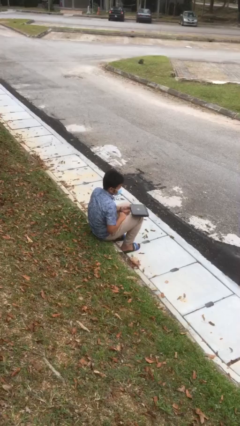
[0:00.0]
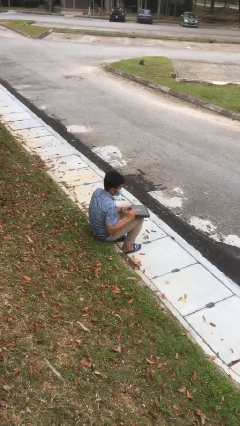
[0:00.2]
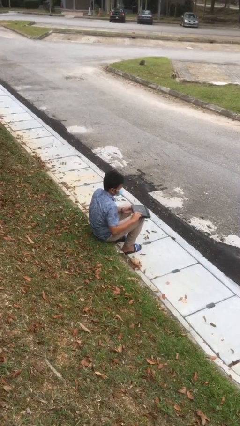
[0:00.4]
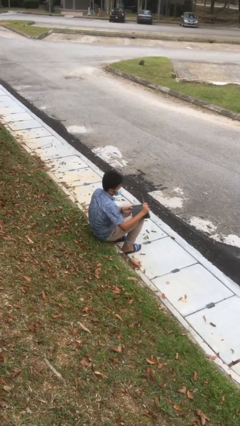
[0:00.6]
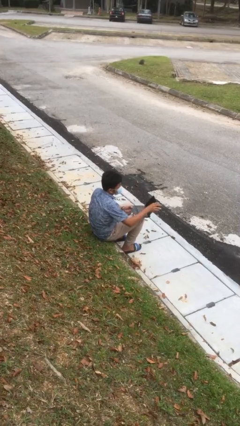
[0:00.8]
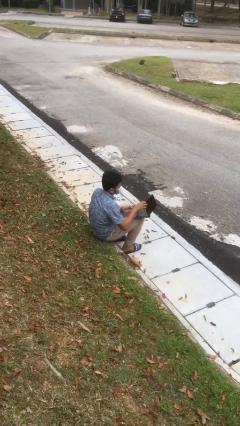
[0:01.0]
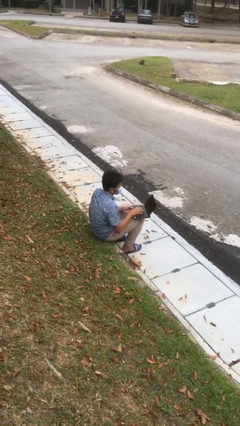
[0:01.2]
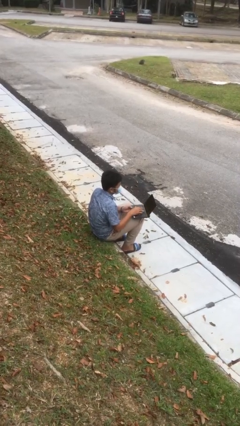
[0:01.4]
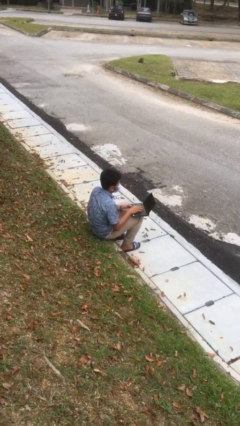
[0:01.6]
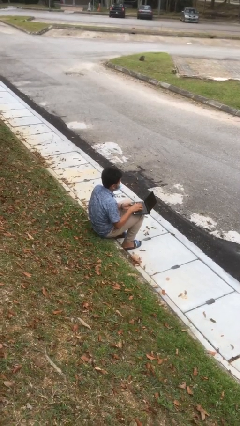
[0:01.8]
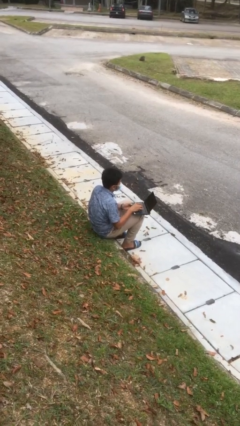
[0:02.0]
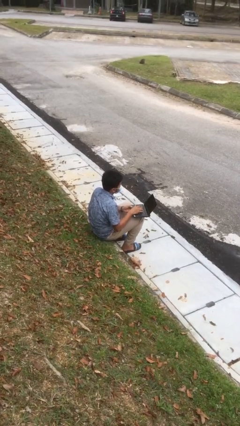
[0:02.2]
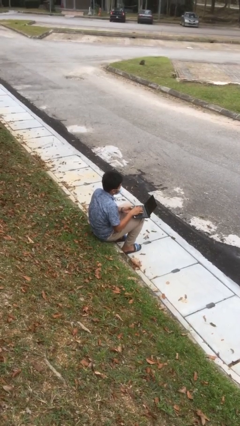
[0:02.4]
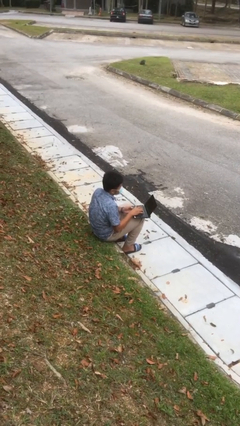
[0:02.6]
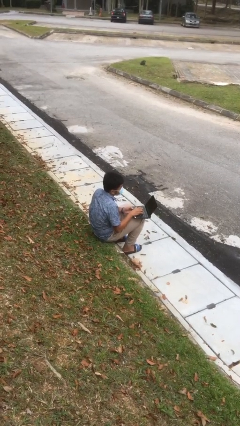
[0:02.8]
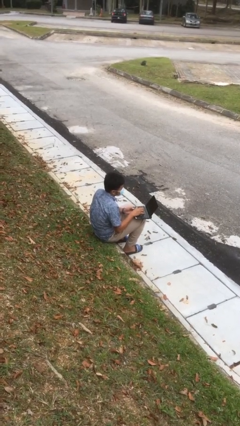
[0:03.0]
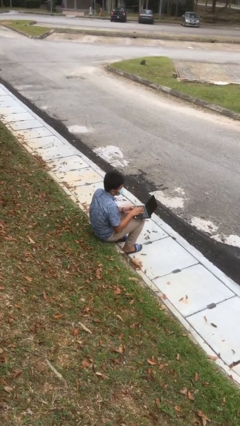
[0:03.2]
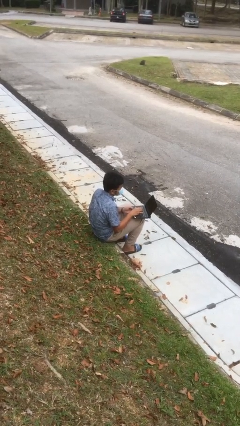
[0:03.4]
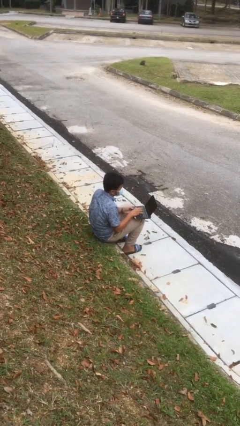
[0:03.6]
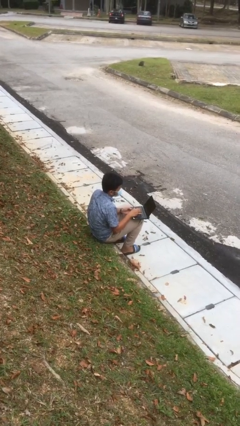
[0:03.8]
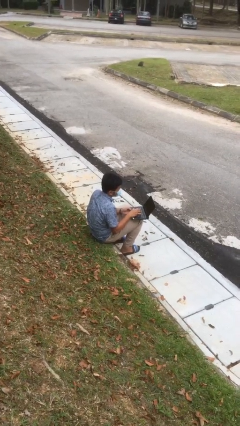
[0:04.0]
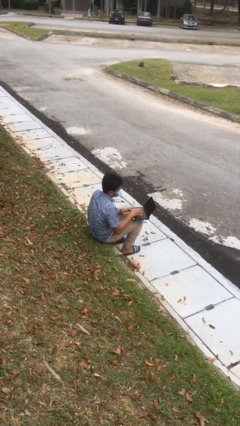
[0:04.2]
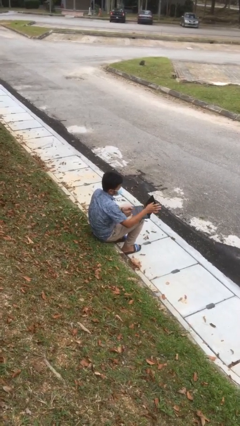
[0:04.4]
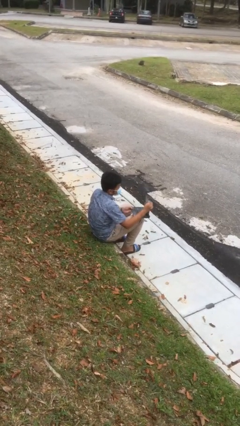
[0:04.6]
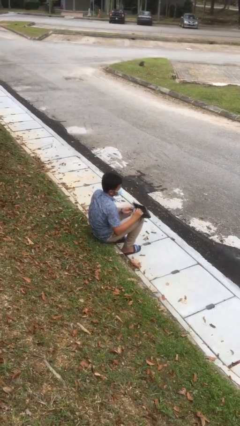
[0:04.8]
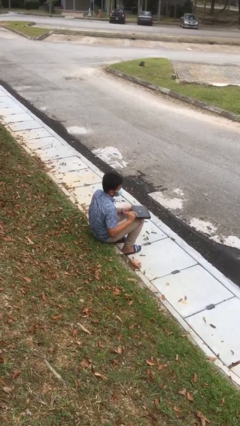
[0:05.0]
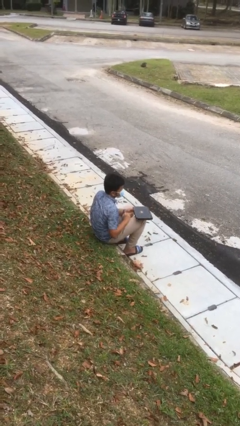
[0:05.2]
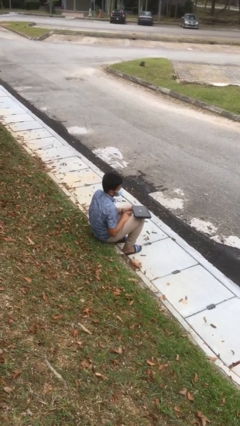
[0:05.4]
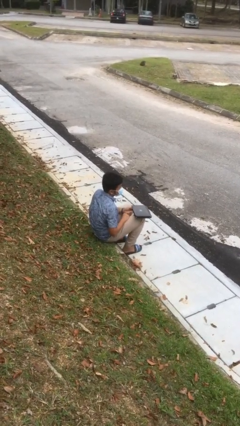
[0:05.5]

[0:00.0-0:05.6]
person interacts with laptop

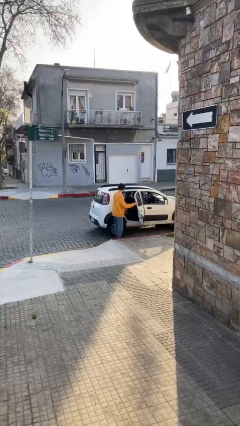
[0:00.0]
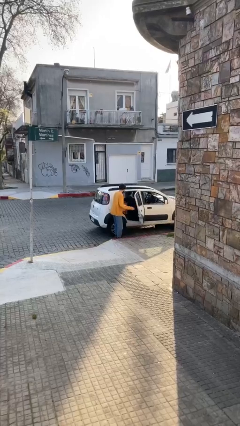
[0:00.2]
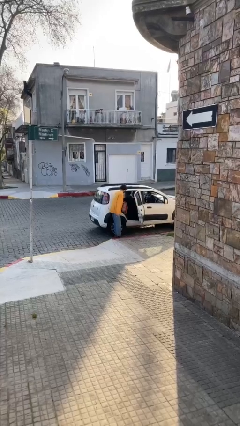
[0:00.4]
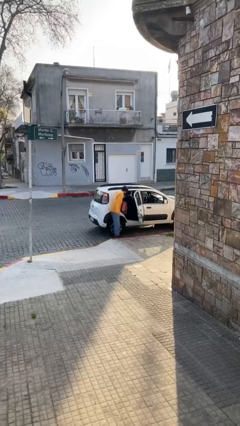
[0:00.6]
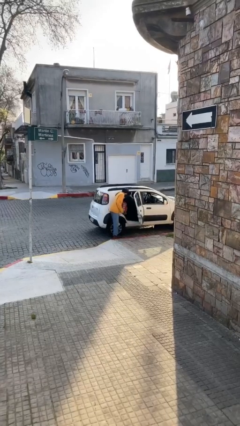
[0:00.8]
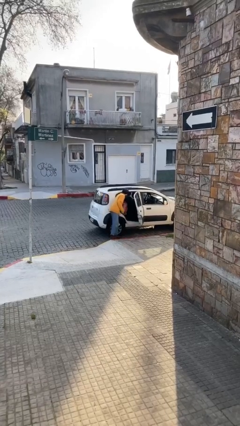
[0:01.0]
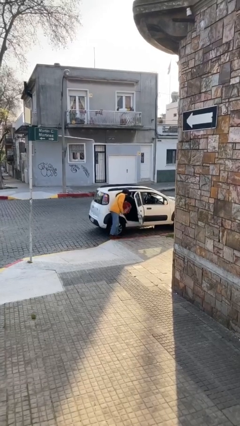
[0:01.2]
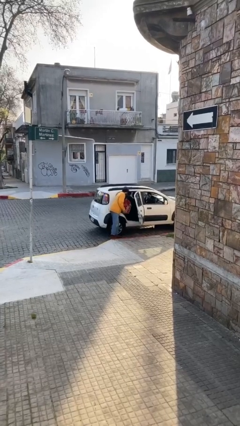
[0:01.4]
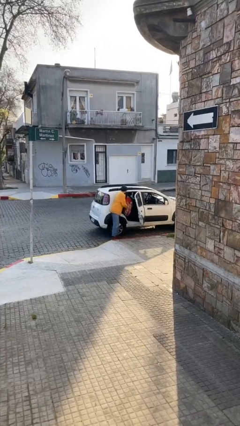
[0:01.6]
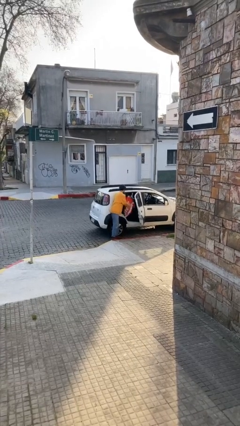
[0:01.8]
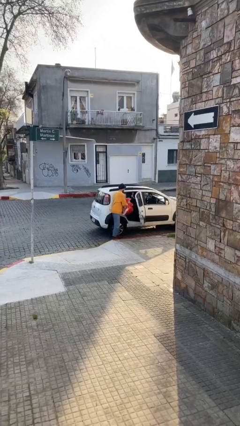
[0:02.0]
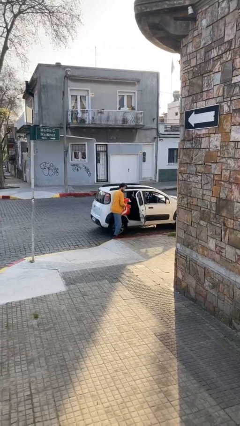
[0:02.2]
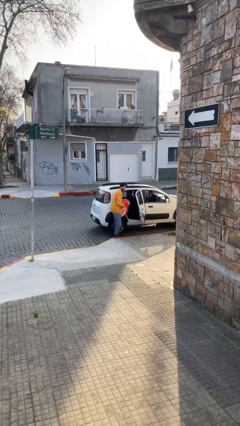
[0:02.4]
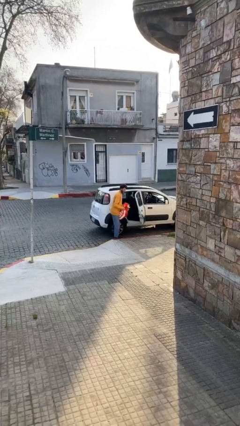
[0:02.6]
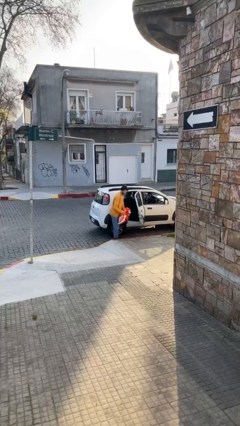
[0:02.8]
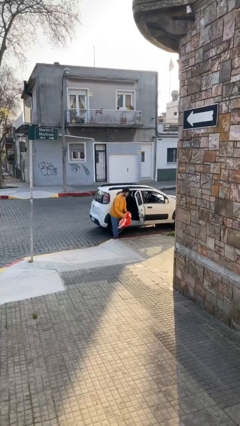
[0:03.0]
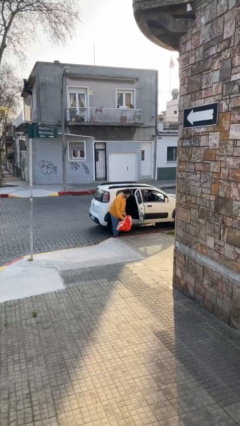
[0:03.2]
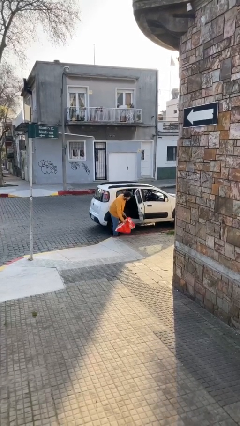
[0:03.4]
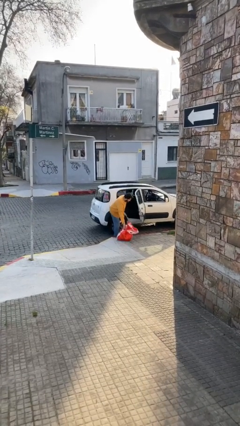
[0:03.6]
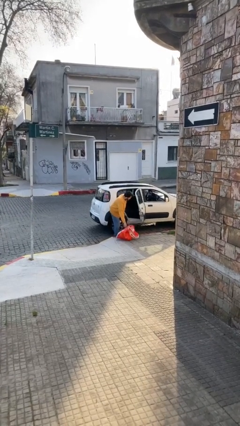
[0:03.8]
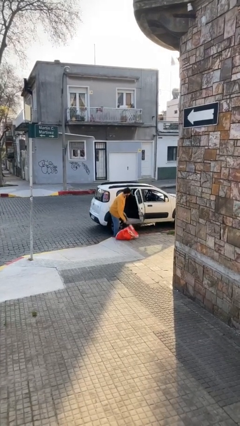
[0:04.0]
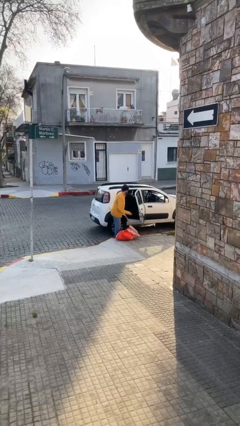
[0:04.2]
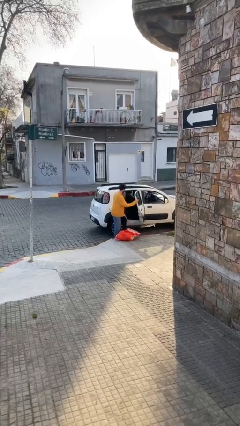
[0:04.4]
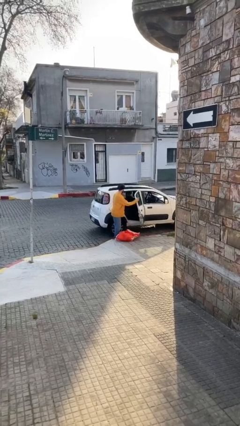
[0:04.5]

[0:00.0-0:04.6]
person unloads car

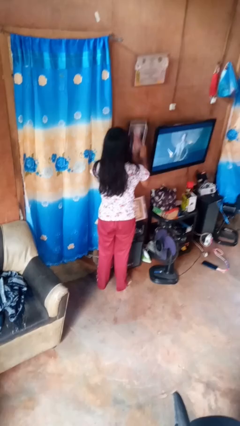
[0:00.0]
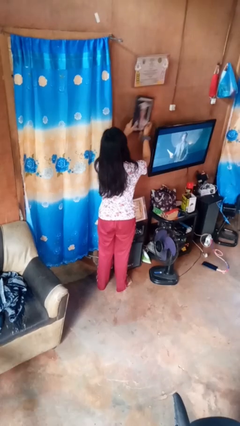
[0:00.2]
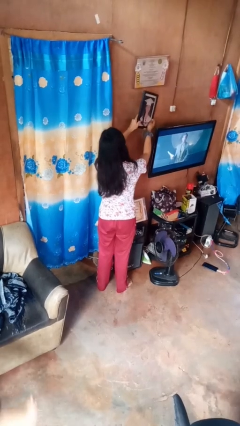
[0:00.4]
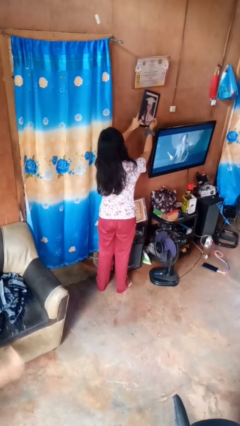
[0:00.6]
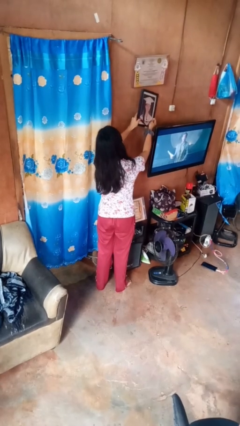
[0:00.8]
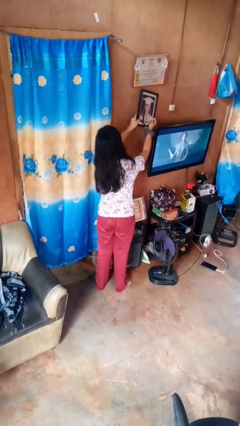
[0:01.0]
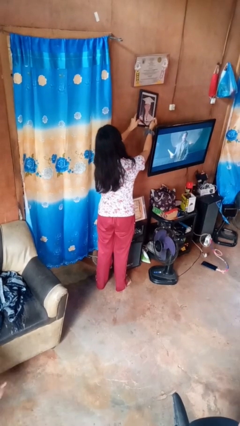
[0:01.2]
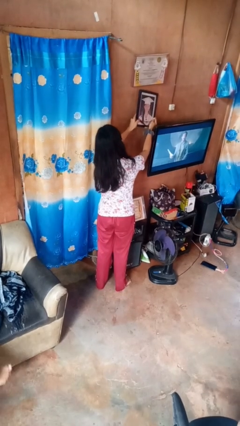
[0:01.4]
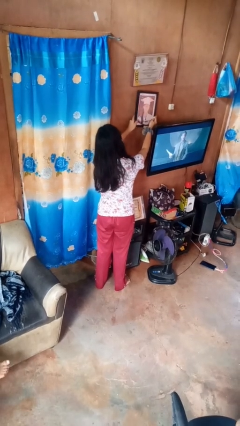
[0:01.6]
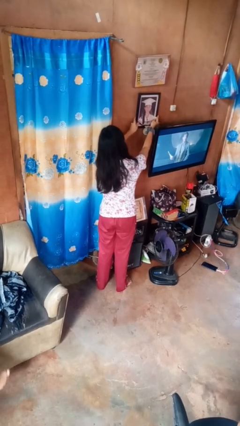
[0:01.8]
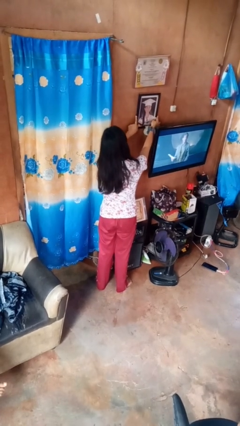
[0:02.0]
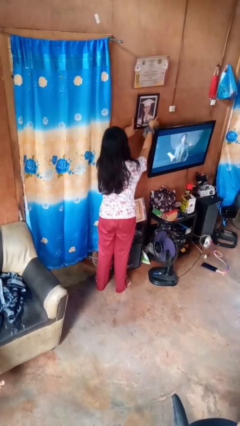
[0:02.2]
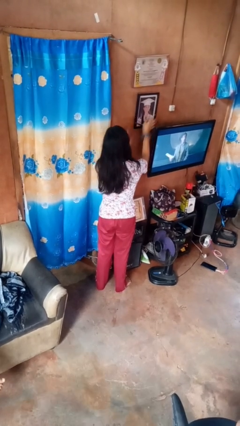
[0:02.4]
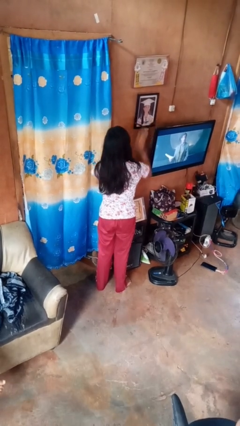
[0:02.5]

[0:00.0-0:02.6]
person puts up picture frame

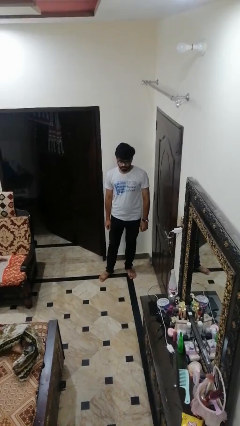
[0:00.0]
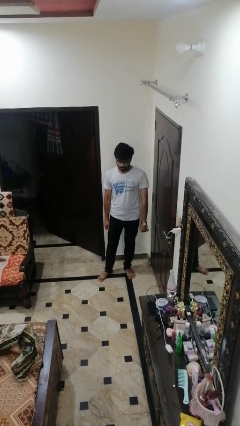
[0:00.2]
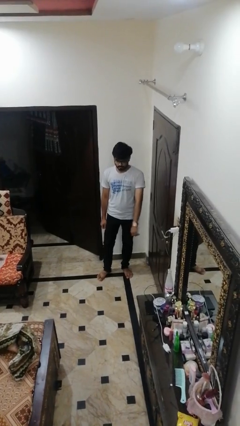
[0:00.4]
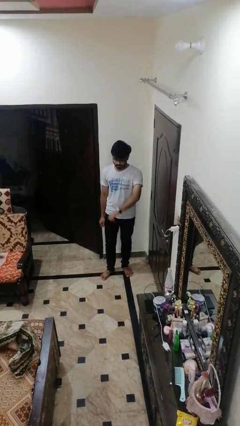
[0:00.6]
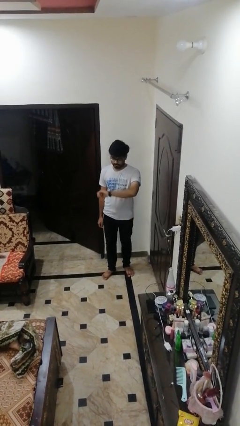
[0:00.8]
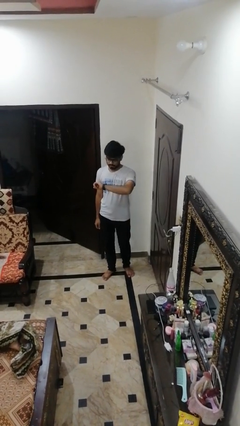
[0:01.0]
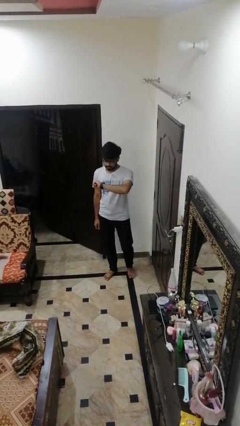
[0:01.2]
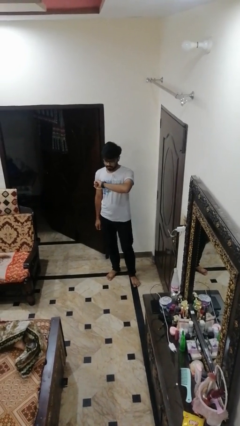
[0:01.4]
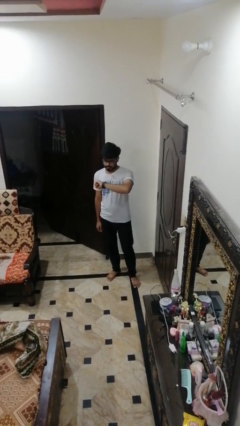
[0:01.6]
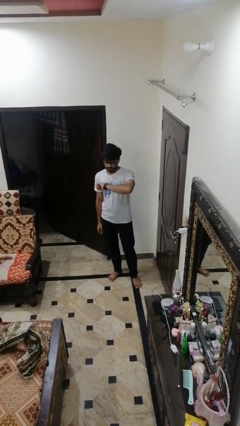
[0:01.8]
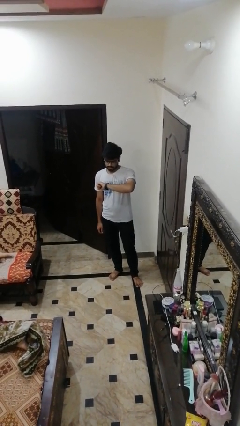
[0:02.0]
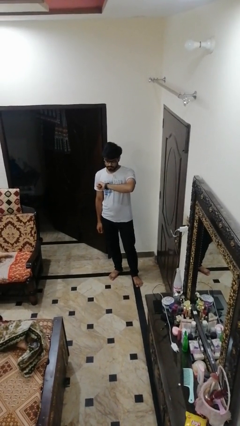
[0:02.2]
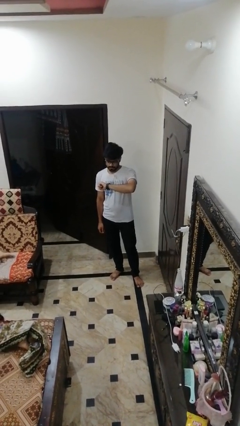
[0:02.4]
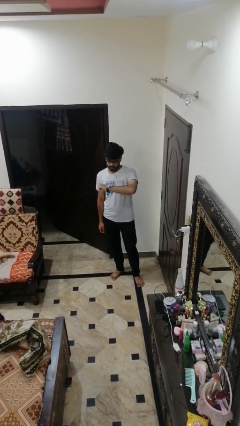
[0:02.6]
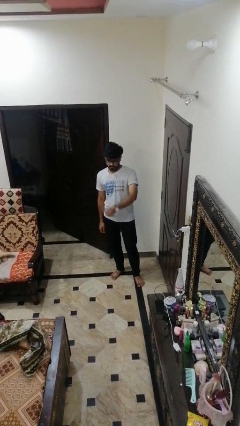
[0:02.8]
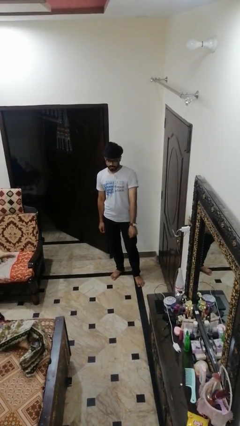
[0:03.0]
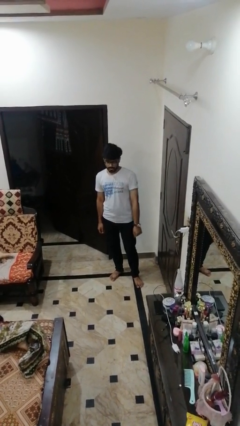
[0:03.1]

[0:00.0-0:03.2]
person looks at wristwatch

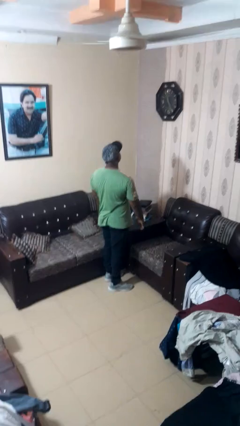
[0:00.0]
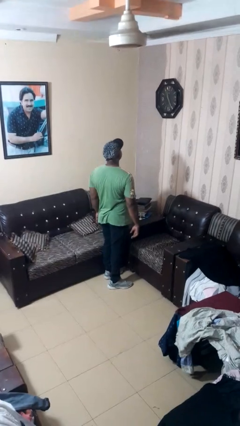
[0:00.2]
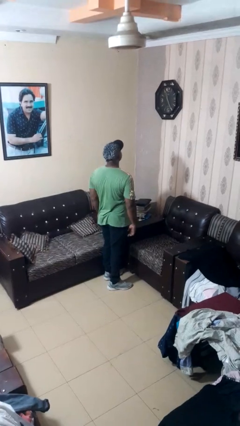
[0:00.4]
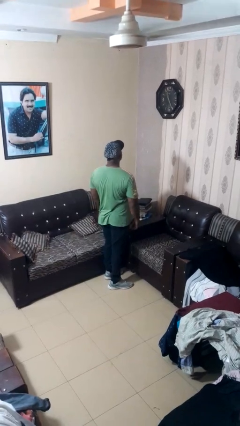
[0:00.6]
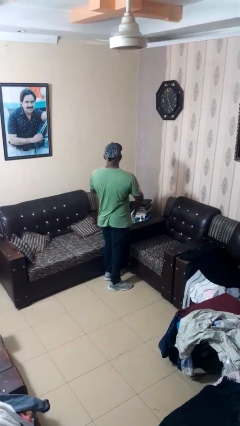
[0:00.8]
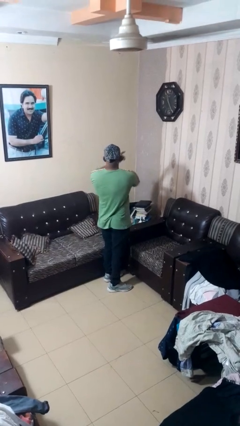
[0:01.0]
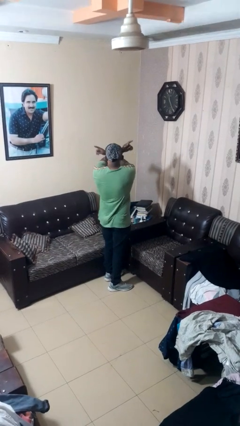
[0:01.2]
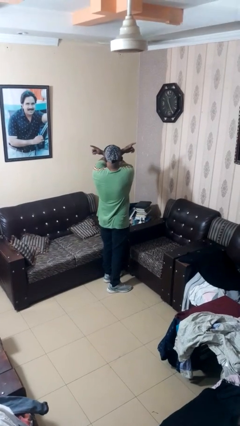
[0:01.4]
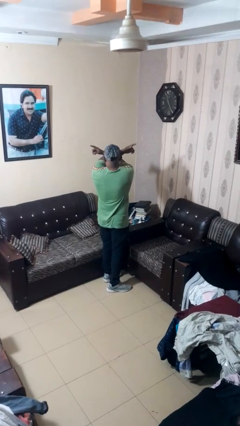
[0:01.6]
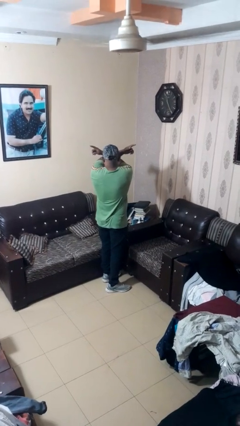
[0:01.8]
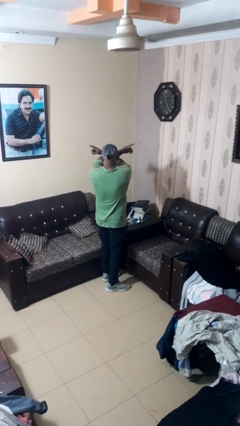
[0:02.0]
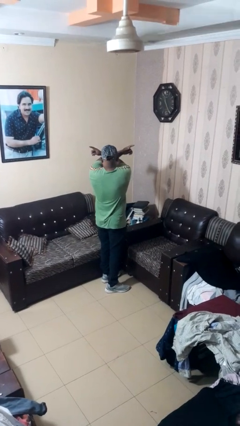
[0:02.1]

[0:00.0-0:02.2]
person gestures arms x
